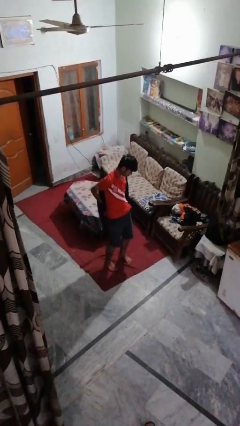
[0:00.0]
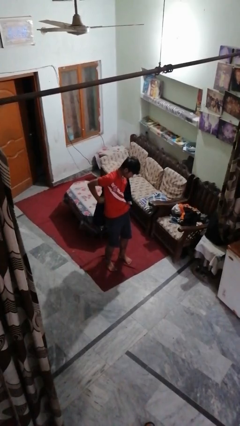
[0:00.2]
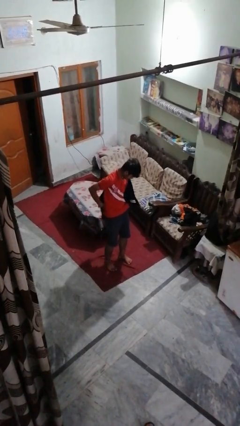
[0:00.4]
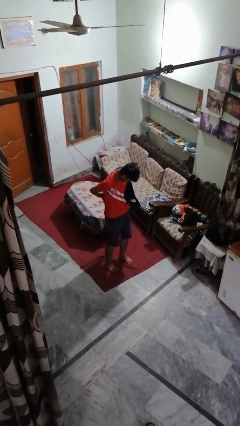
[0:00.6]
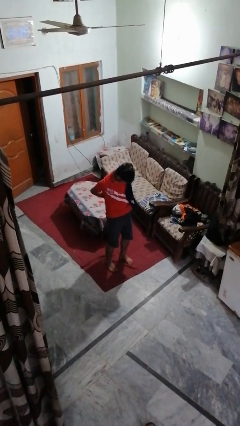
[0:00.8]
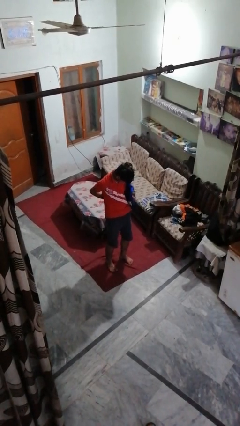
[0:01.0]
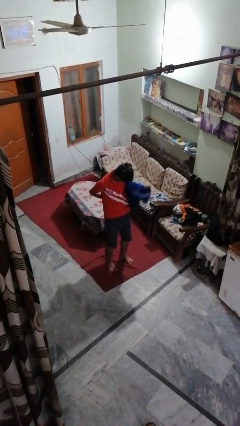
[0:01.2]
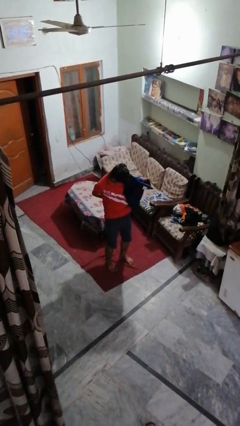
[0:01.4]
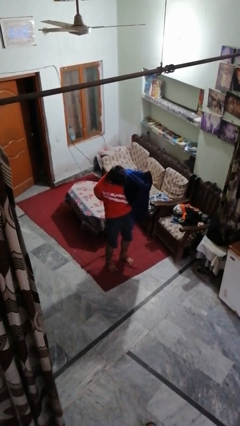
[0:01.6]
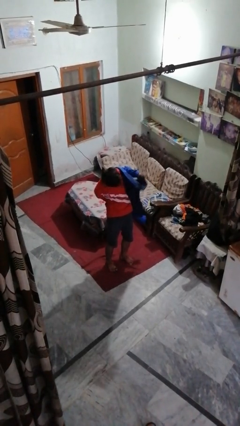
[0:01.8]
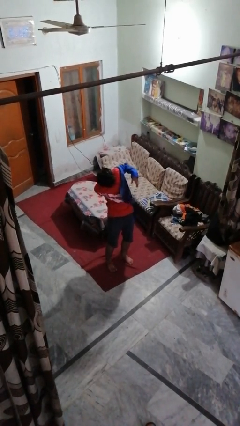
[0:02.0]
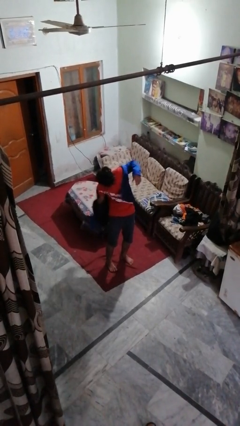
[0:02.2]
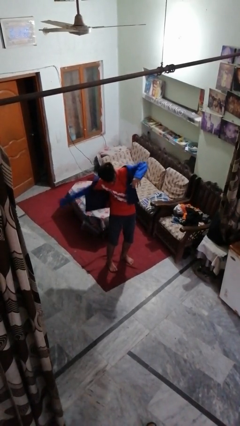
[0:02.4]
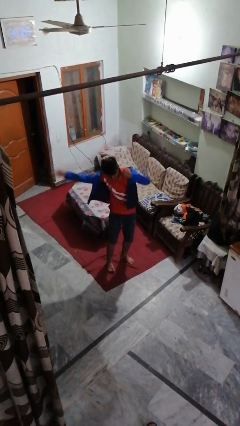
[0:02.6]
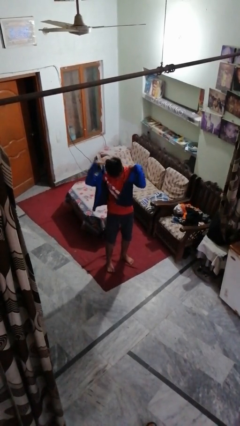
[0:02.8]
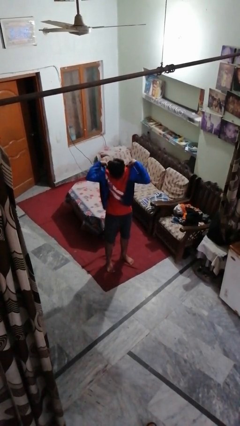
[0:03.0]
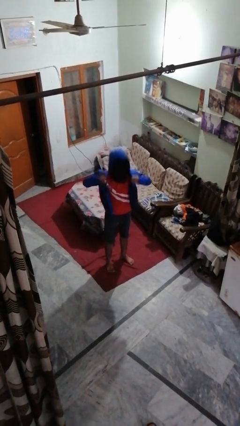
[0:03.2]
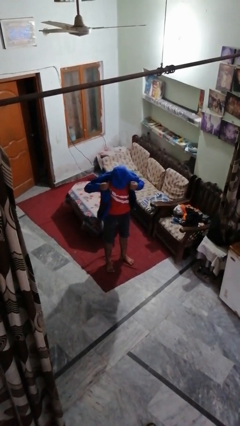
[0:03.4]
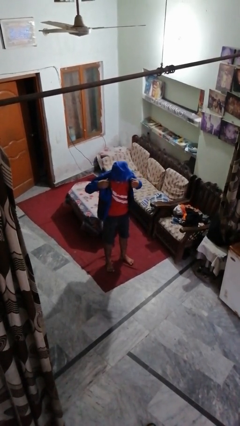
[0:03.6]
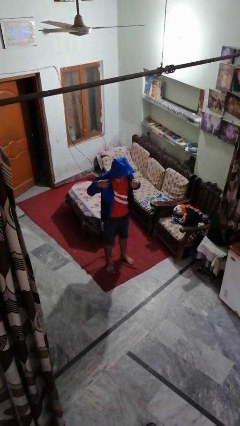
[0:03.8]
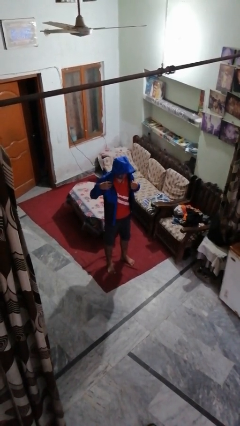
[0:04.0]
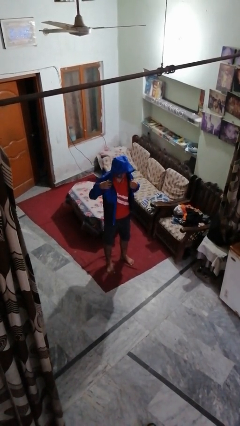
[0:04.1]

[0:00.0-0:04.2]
person puts on hoodie

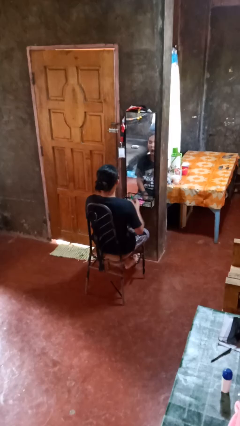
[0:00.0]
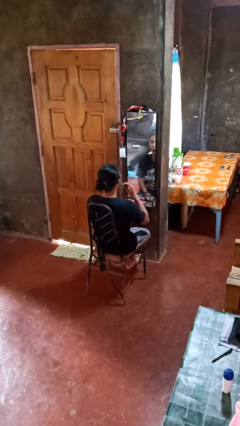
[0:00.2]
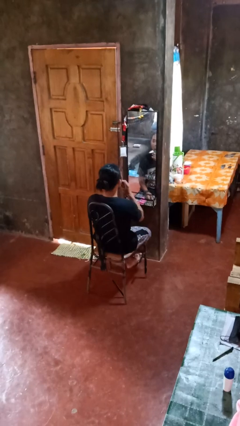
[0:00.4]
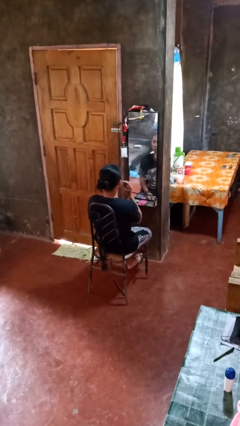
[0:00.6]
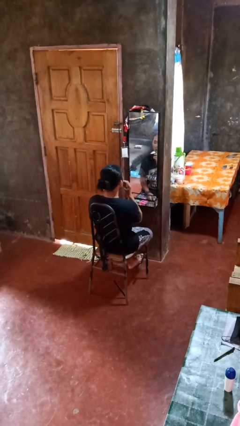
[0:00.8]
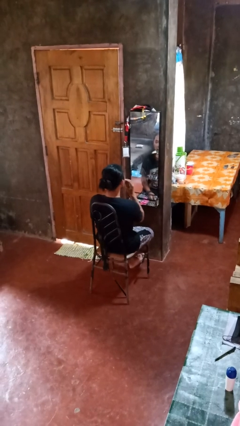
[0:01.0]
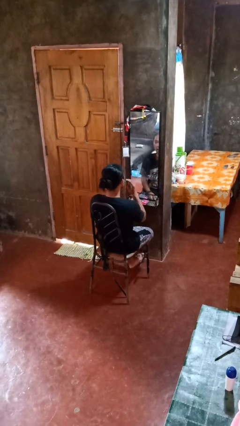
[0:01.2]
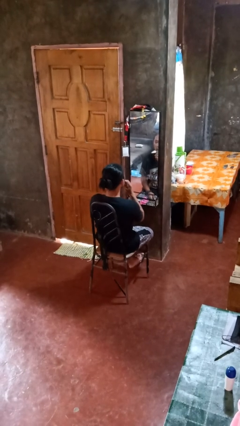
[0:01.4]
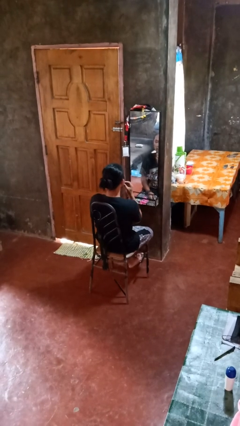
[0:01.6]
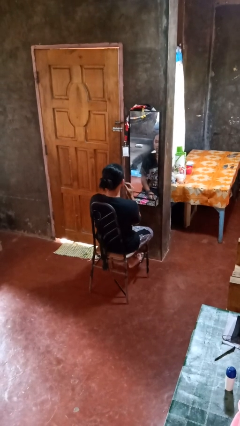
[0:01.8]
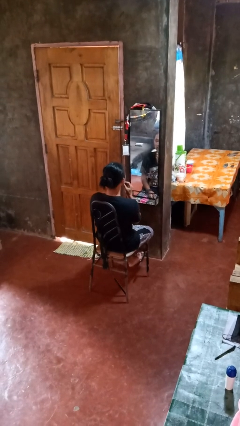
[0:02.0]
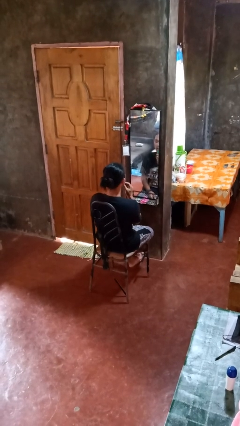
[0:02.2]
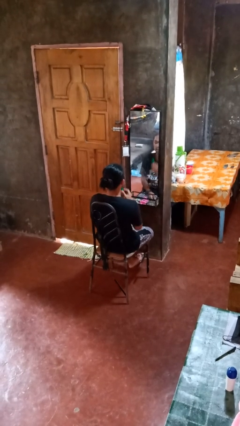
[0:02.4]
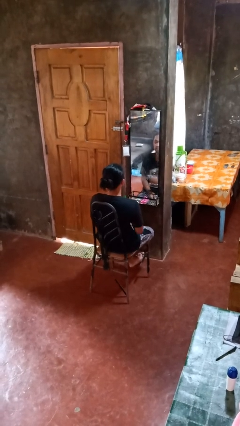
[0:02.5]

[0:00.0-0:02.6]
person applies lip makeup

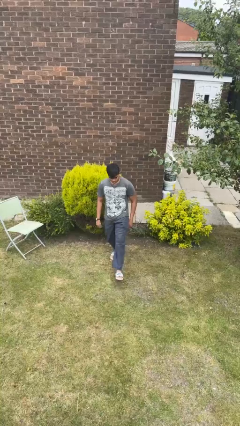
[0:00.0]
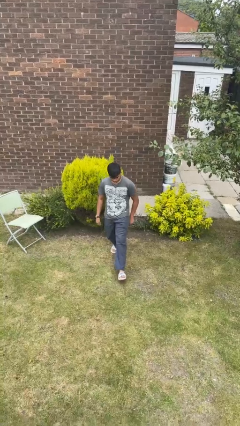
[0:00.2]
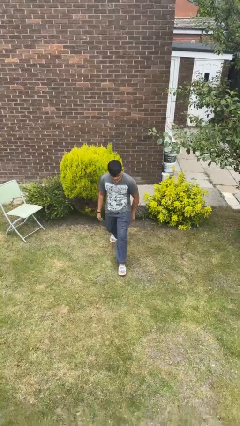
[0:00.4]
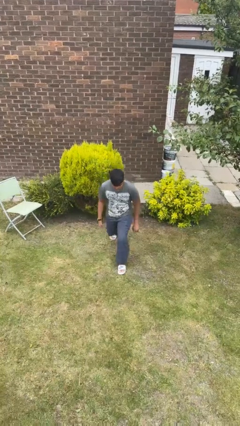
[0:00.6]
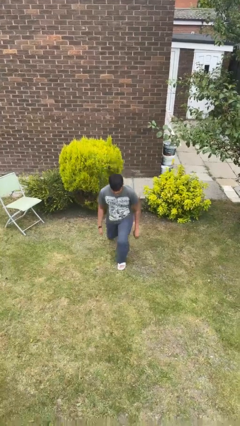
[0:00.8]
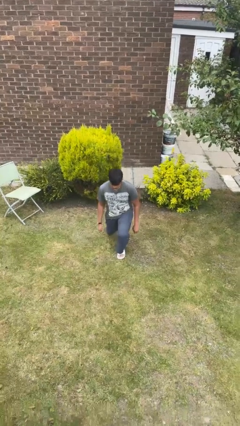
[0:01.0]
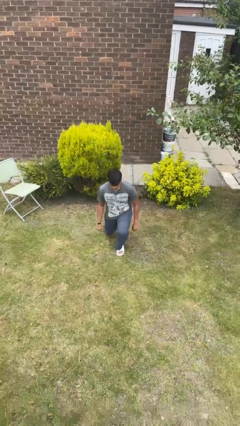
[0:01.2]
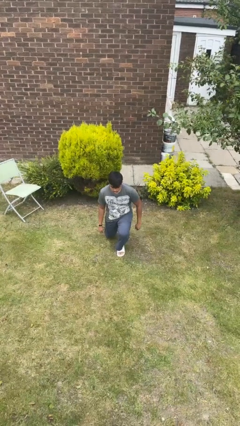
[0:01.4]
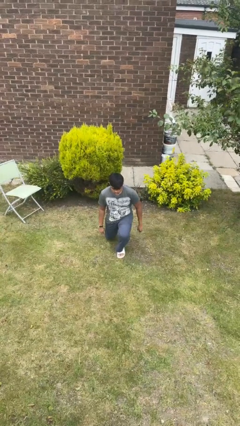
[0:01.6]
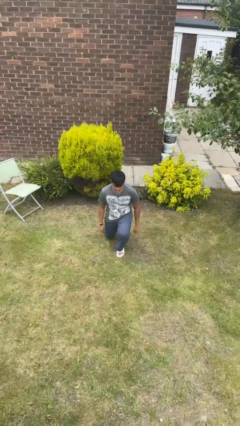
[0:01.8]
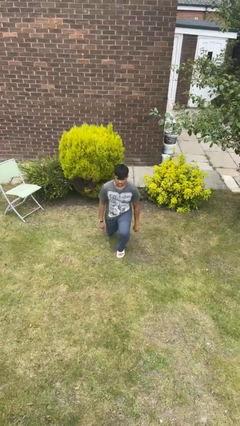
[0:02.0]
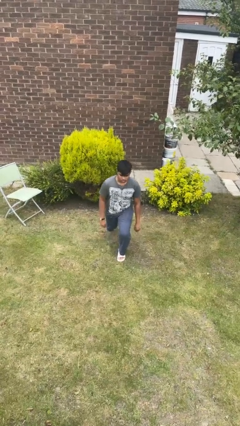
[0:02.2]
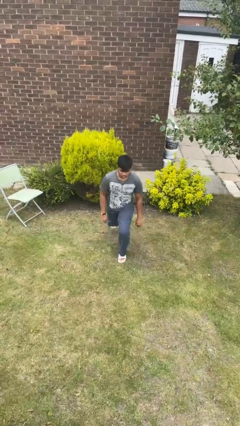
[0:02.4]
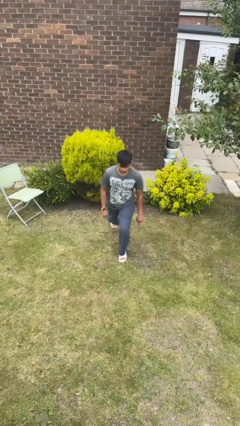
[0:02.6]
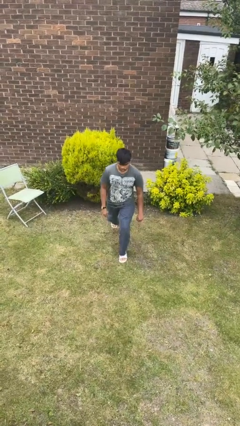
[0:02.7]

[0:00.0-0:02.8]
person exercises with lunges

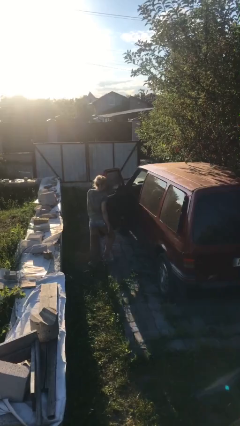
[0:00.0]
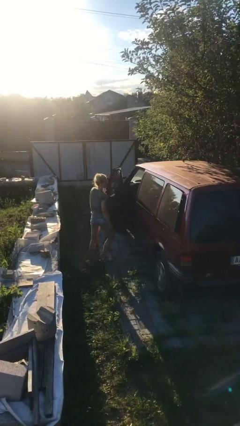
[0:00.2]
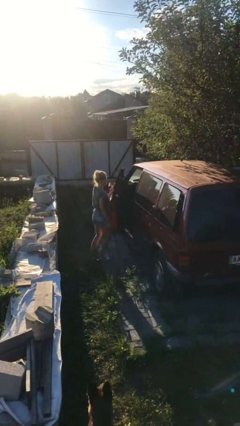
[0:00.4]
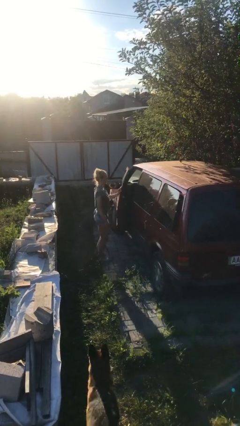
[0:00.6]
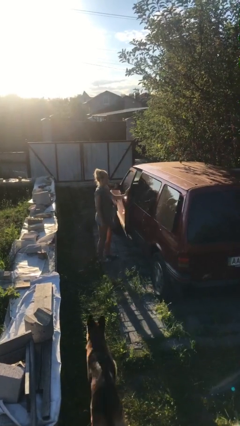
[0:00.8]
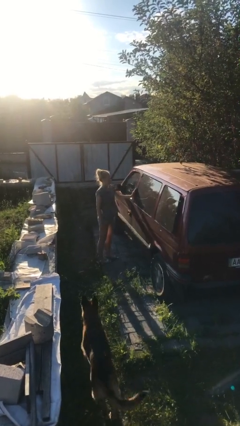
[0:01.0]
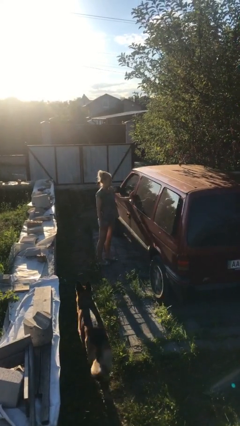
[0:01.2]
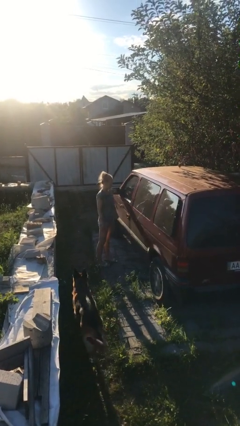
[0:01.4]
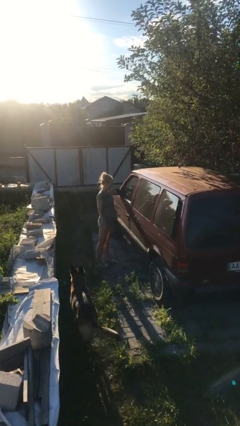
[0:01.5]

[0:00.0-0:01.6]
person closes car door

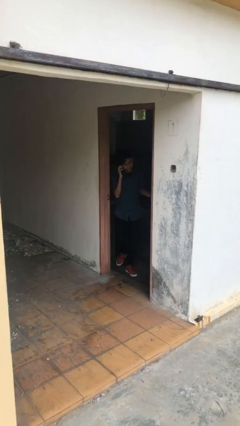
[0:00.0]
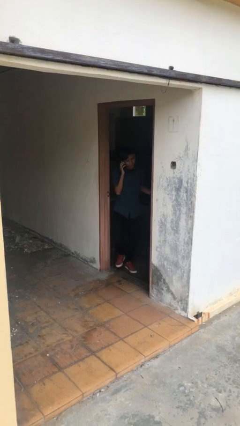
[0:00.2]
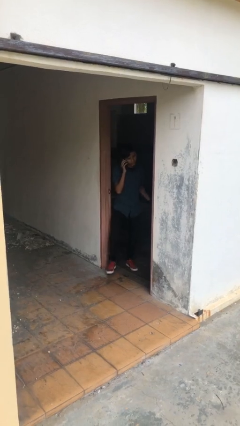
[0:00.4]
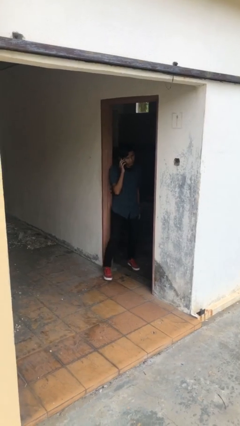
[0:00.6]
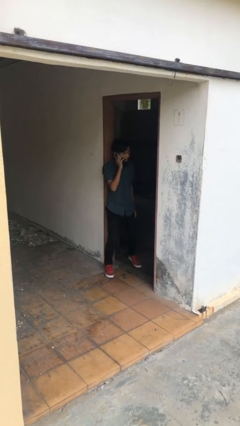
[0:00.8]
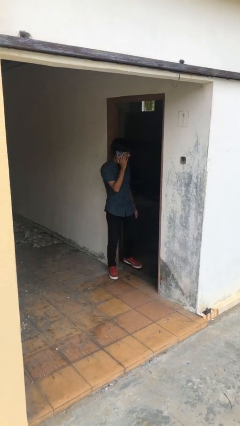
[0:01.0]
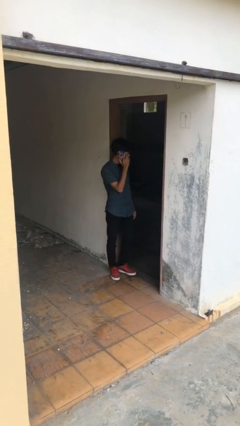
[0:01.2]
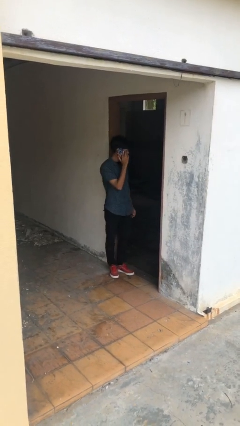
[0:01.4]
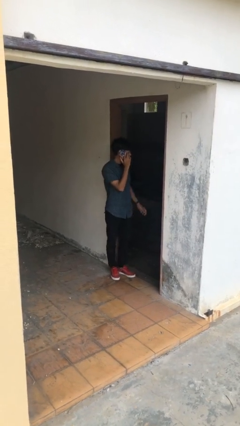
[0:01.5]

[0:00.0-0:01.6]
person enters scene through structure

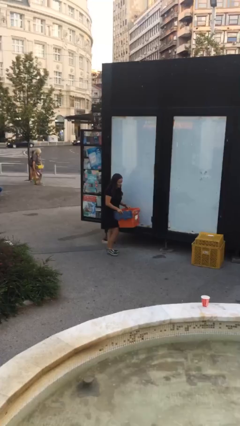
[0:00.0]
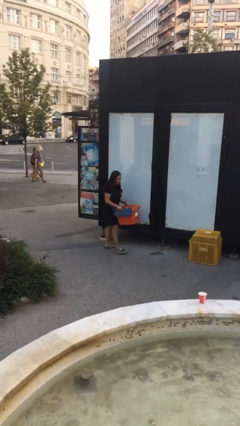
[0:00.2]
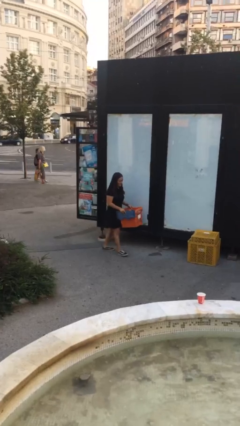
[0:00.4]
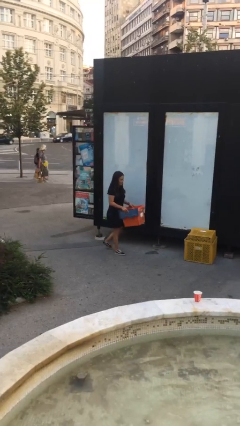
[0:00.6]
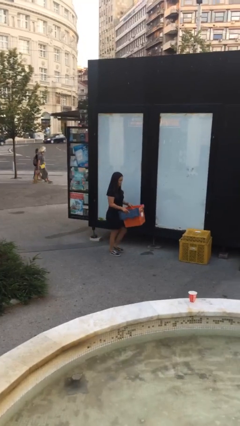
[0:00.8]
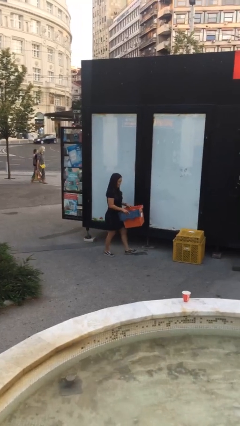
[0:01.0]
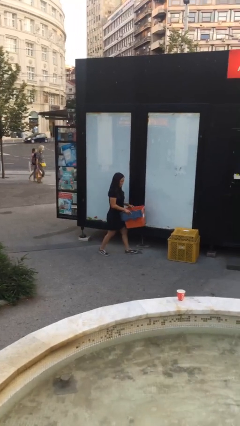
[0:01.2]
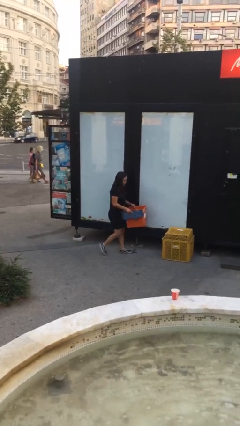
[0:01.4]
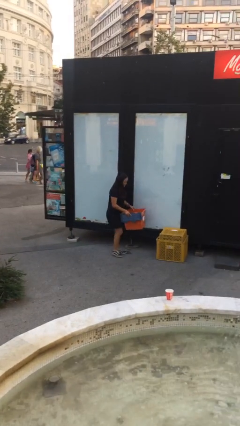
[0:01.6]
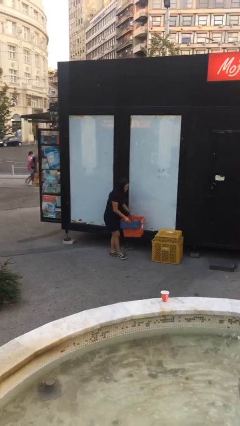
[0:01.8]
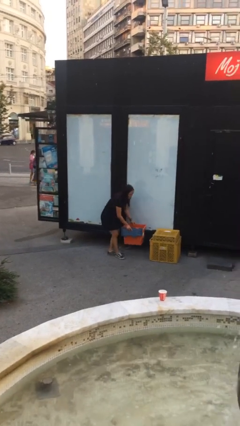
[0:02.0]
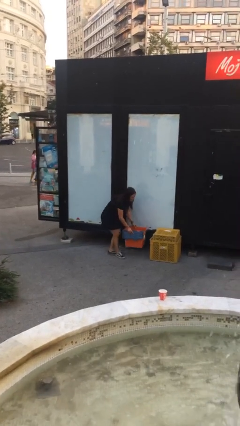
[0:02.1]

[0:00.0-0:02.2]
person carries heavy object

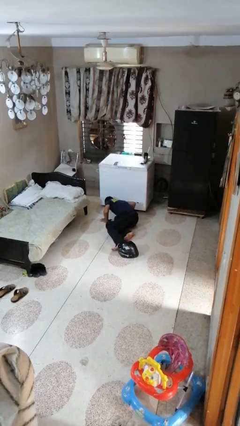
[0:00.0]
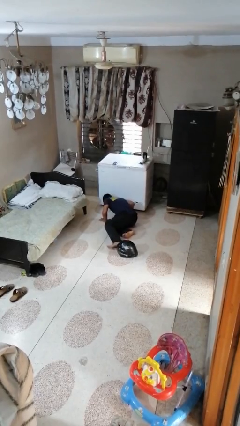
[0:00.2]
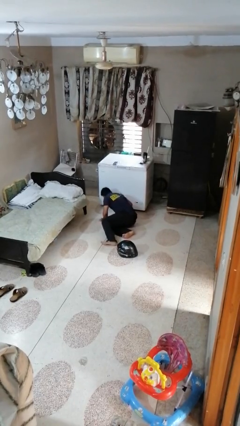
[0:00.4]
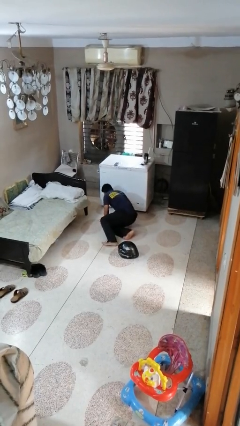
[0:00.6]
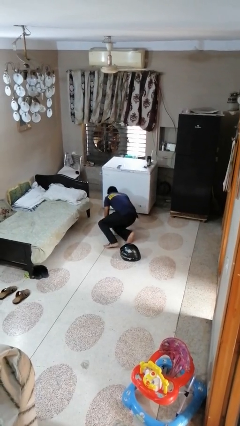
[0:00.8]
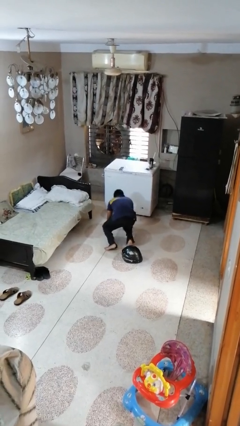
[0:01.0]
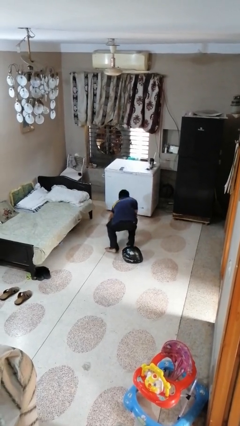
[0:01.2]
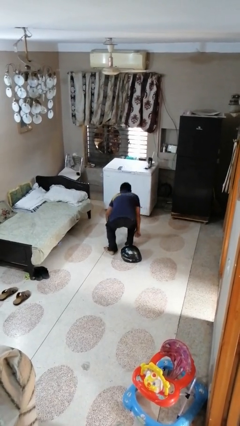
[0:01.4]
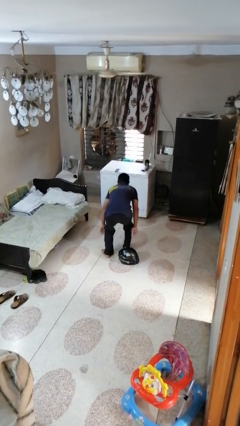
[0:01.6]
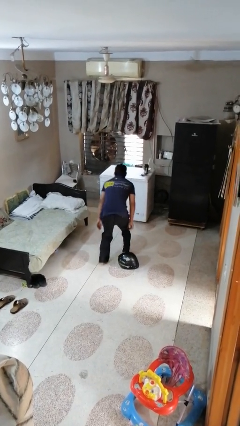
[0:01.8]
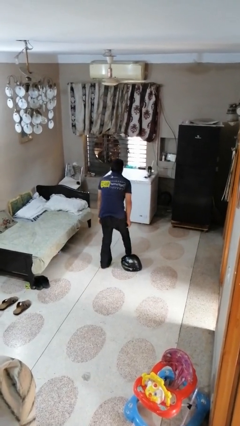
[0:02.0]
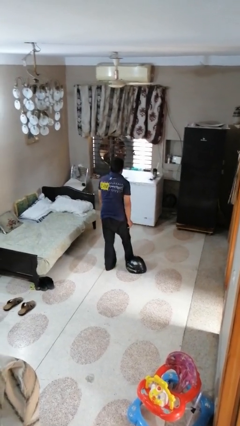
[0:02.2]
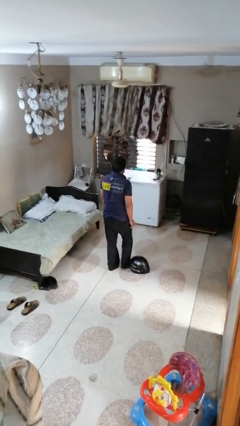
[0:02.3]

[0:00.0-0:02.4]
person stands up from floor
